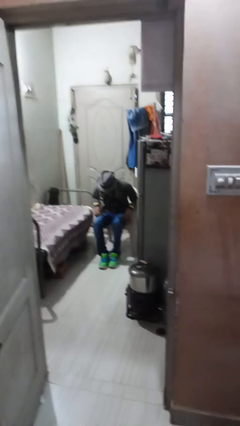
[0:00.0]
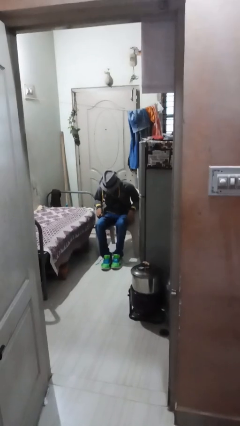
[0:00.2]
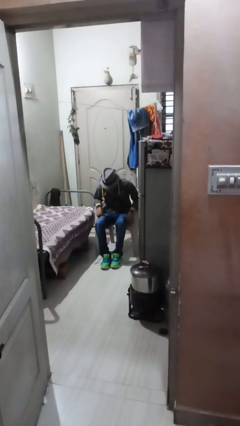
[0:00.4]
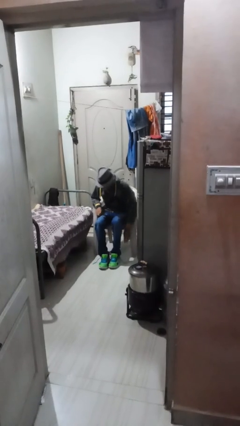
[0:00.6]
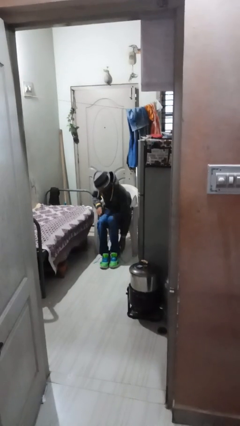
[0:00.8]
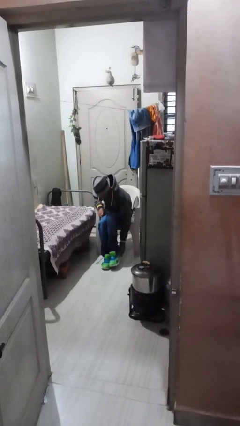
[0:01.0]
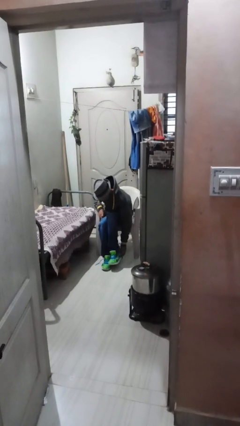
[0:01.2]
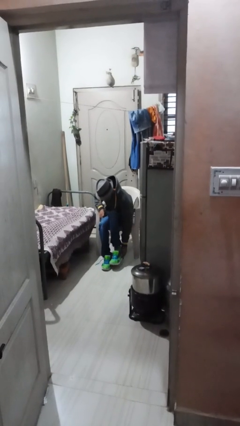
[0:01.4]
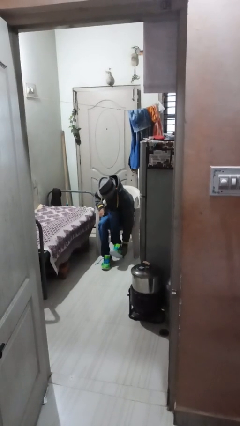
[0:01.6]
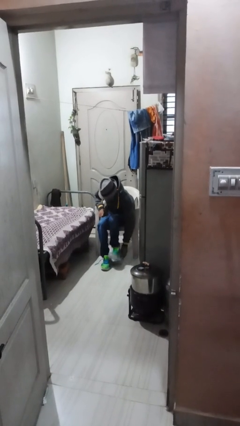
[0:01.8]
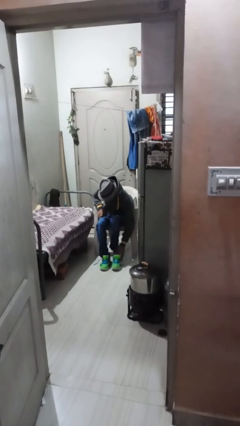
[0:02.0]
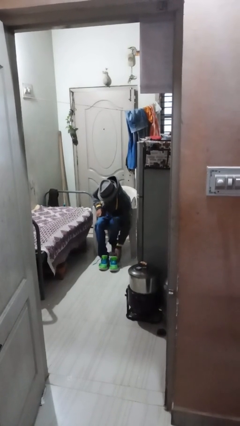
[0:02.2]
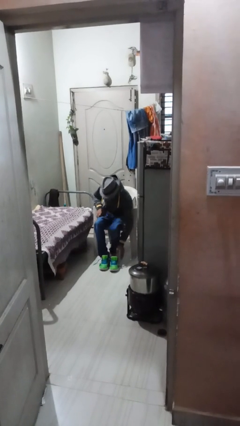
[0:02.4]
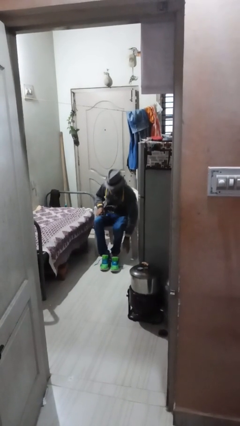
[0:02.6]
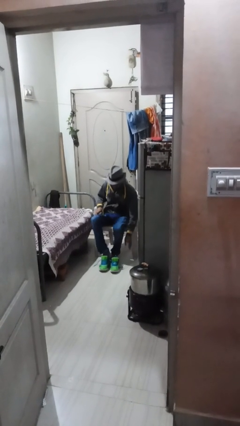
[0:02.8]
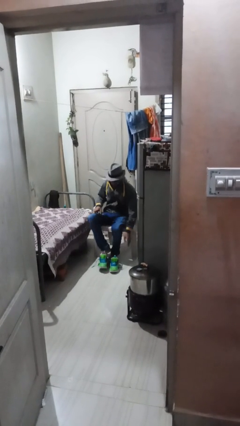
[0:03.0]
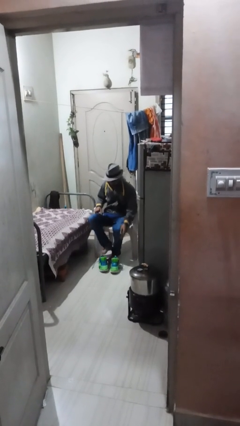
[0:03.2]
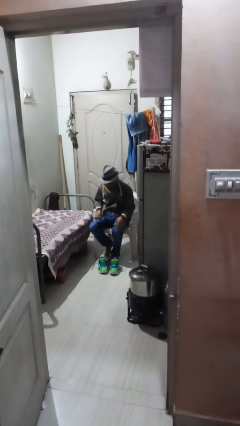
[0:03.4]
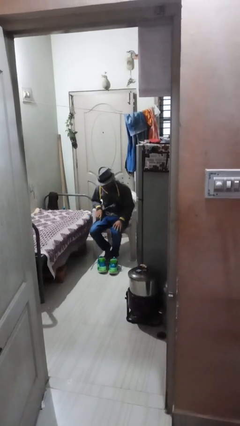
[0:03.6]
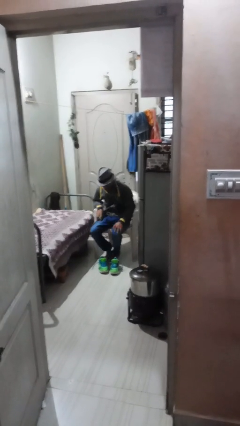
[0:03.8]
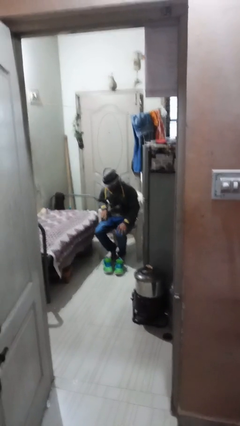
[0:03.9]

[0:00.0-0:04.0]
person takes off shoes

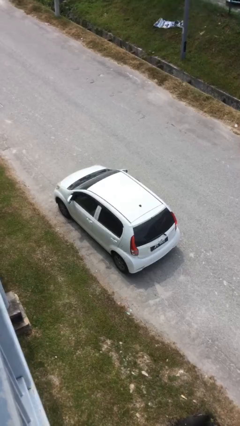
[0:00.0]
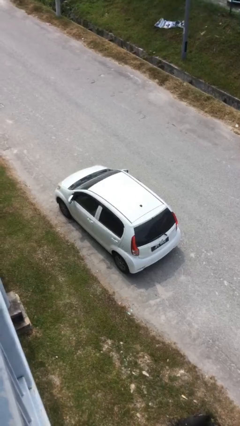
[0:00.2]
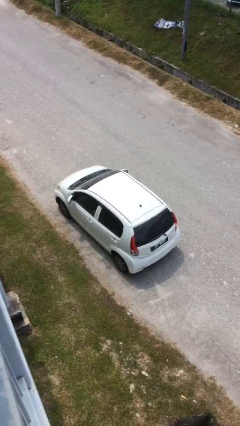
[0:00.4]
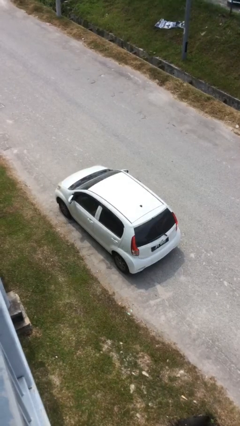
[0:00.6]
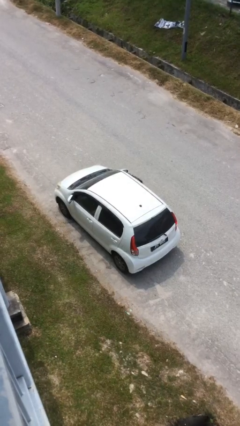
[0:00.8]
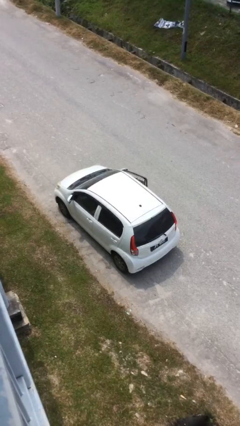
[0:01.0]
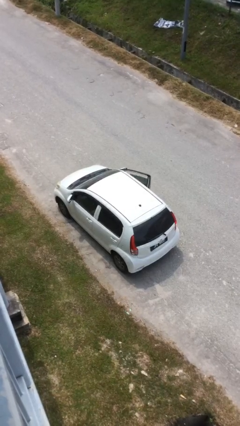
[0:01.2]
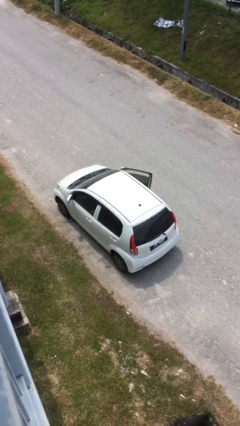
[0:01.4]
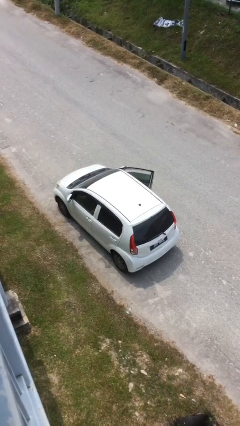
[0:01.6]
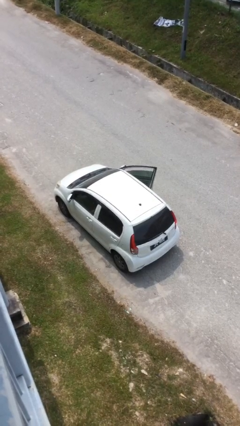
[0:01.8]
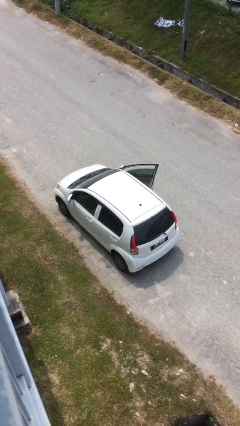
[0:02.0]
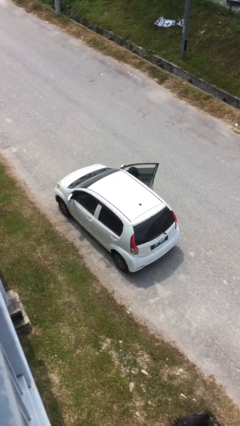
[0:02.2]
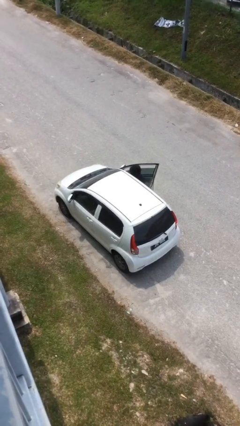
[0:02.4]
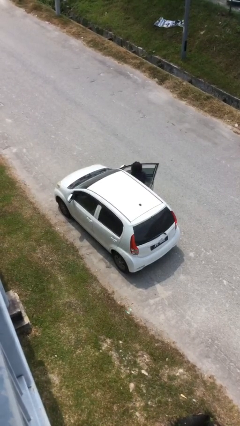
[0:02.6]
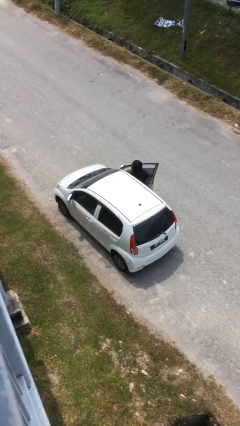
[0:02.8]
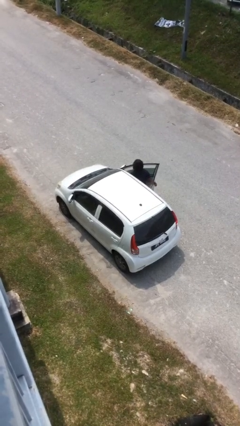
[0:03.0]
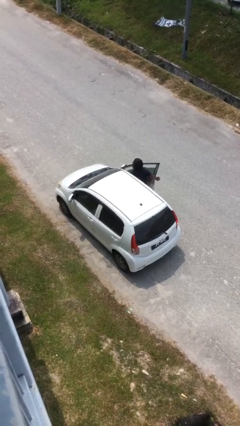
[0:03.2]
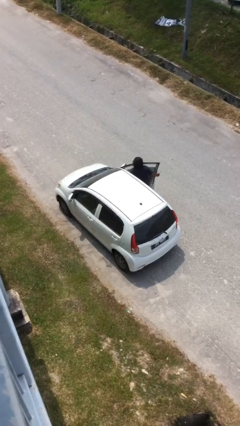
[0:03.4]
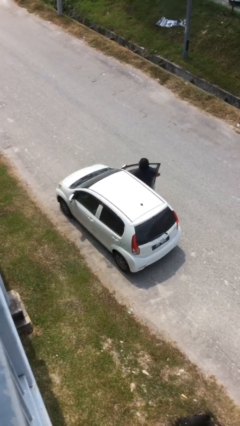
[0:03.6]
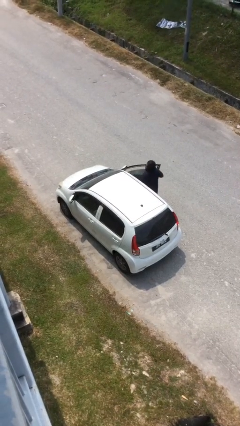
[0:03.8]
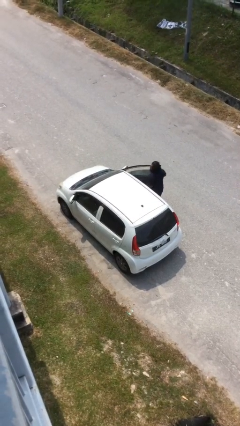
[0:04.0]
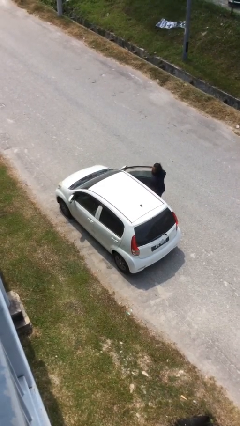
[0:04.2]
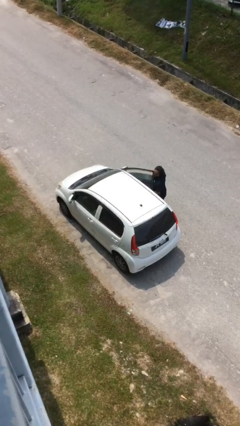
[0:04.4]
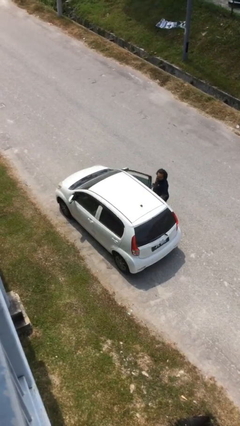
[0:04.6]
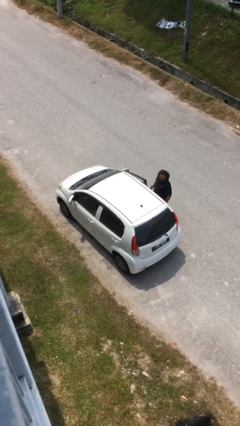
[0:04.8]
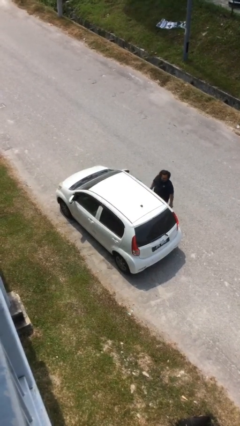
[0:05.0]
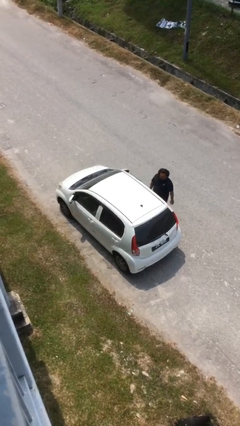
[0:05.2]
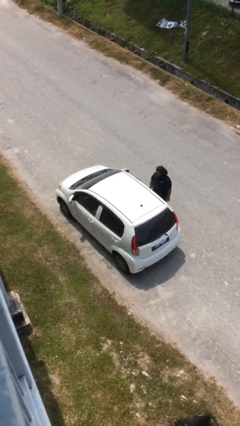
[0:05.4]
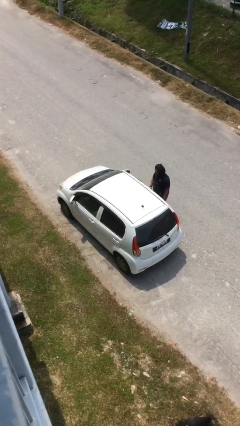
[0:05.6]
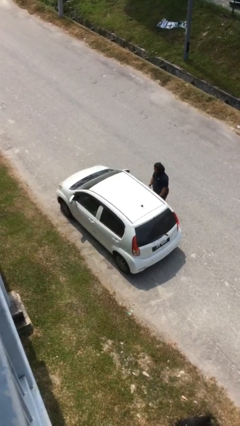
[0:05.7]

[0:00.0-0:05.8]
car drops off person

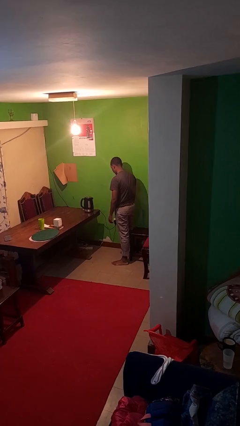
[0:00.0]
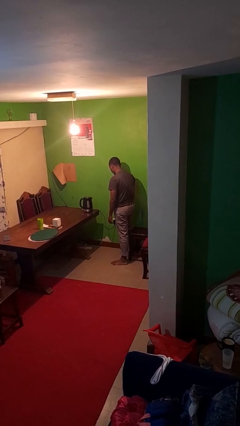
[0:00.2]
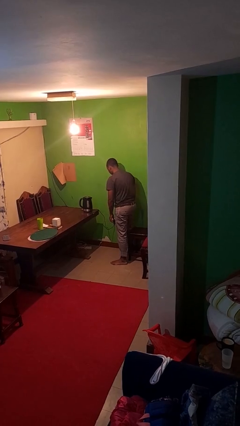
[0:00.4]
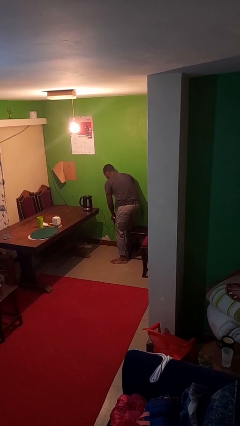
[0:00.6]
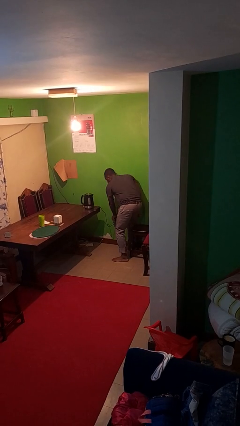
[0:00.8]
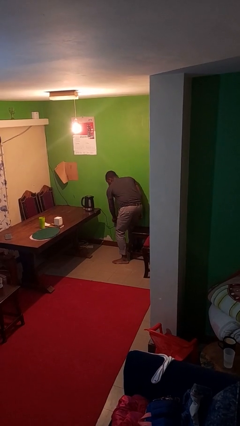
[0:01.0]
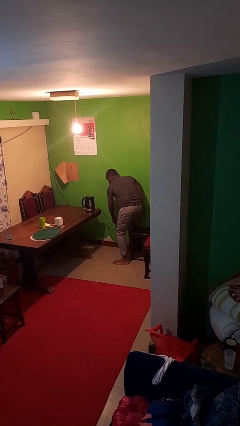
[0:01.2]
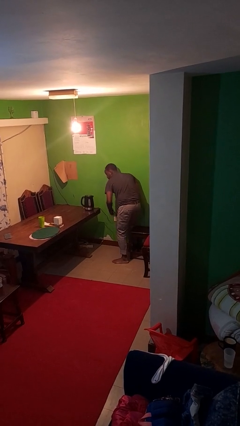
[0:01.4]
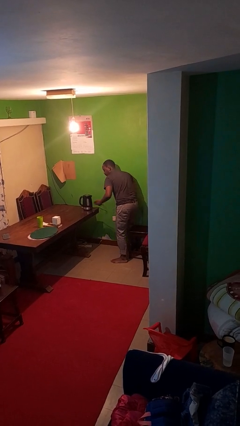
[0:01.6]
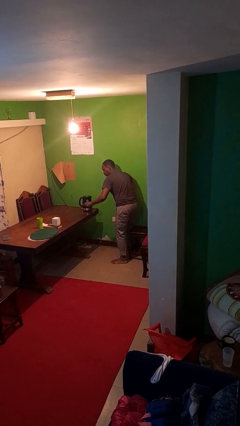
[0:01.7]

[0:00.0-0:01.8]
person unplugs from electrical socket

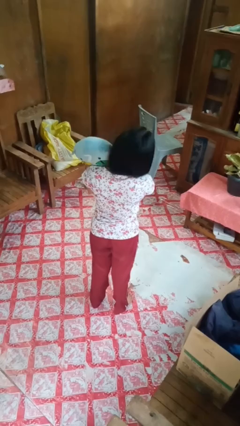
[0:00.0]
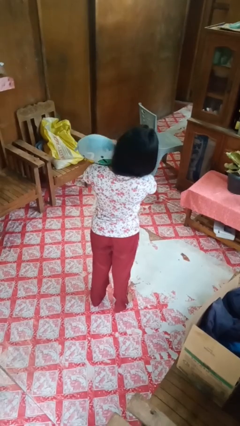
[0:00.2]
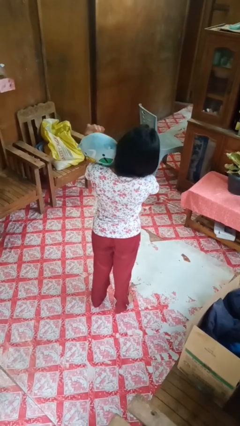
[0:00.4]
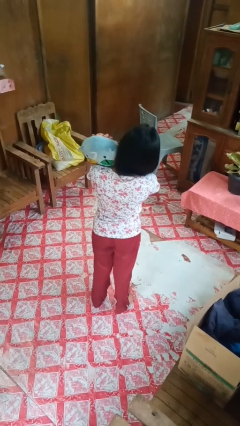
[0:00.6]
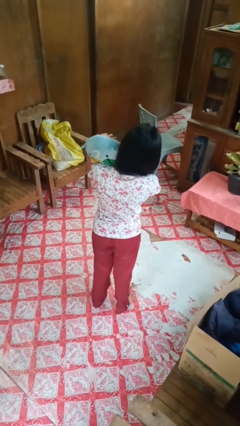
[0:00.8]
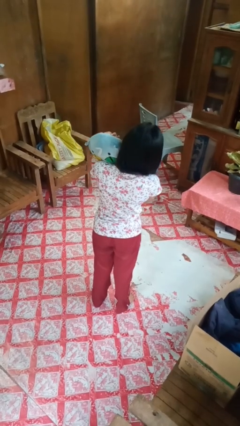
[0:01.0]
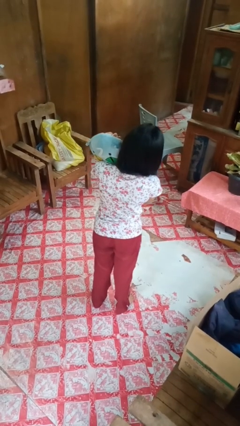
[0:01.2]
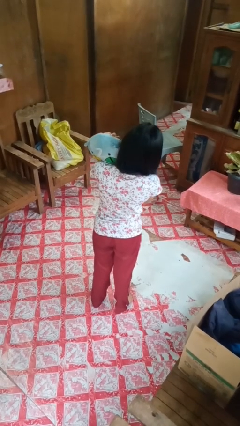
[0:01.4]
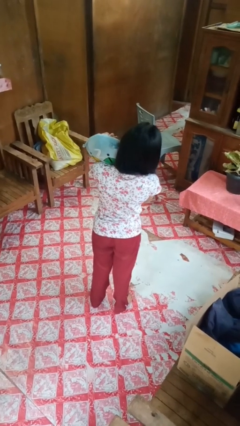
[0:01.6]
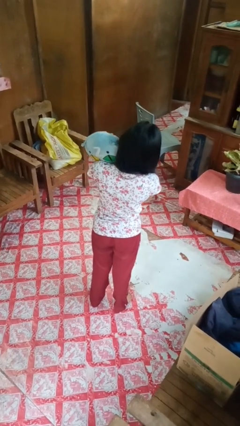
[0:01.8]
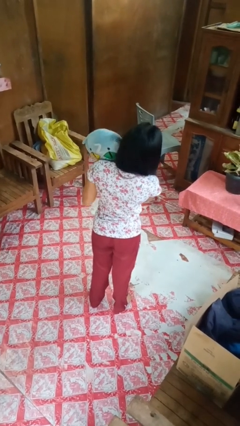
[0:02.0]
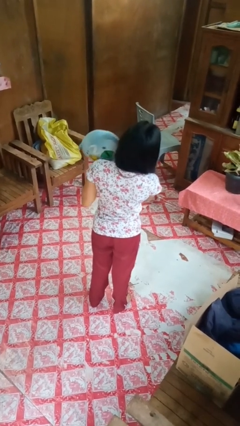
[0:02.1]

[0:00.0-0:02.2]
person hugs stuffed animal

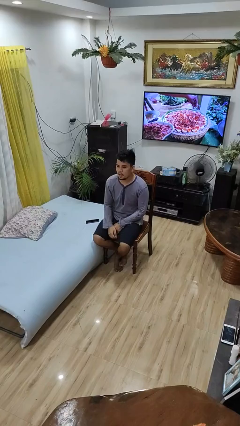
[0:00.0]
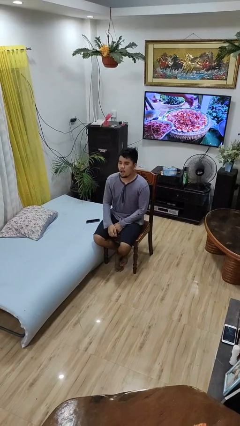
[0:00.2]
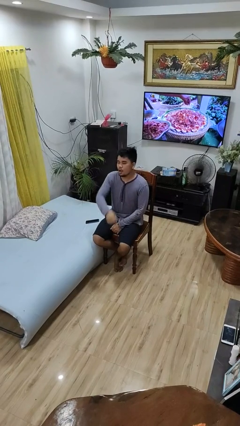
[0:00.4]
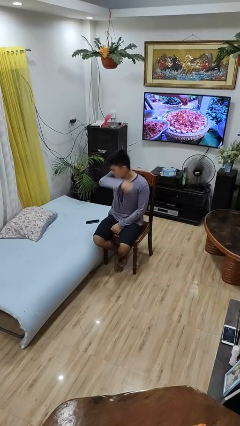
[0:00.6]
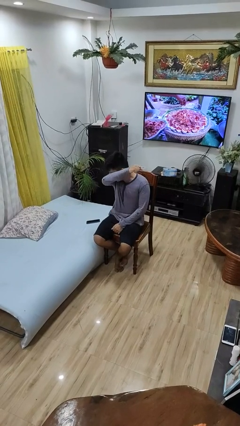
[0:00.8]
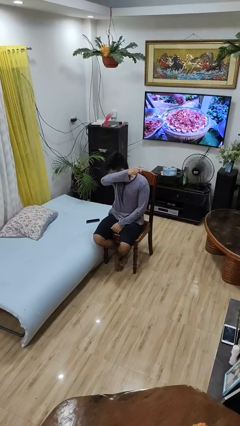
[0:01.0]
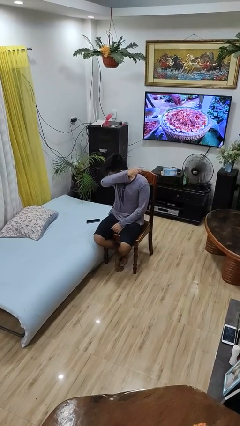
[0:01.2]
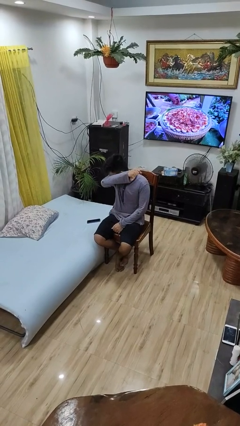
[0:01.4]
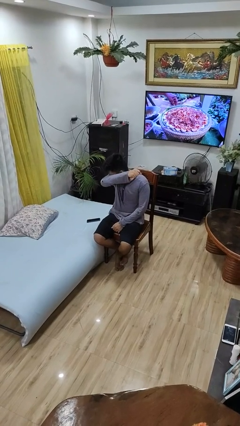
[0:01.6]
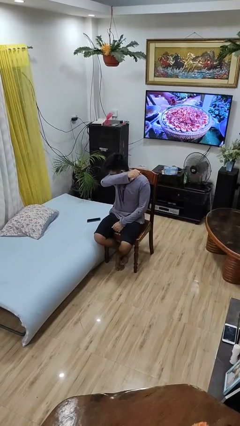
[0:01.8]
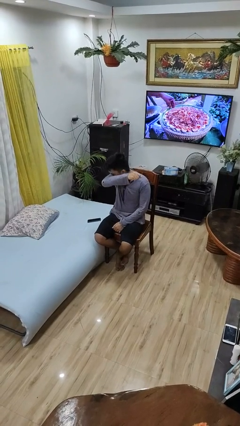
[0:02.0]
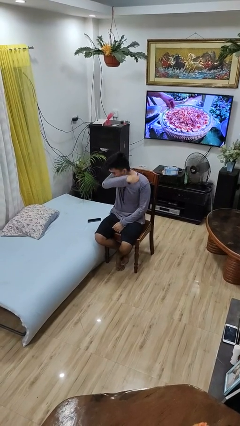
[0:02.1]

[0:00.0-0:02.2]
person sneezes into arm

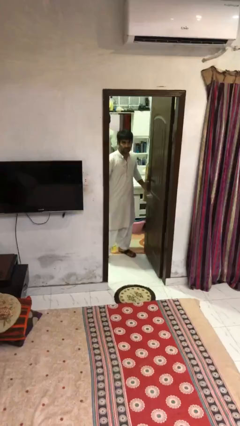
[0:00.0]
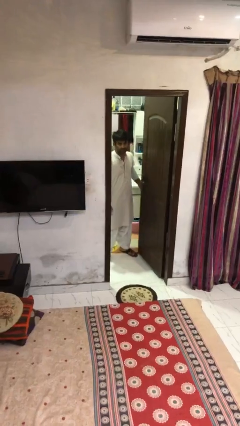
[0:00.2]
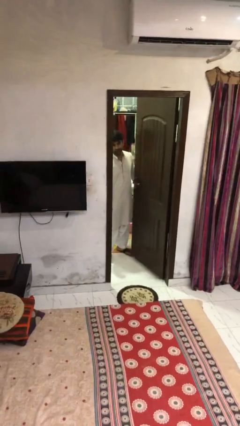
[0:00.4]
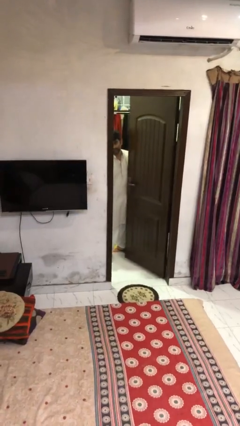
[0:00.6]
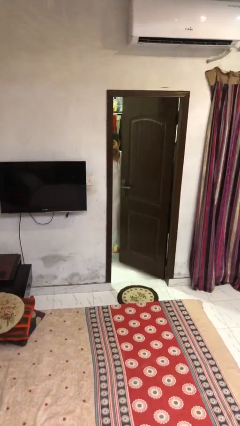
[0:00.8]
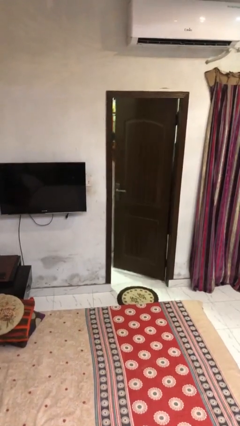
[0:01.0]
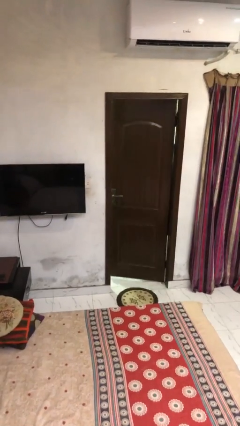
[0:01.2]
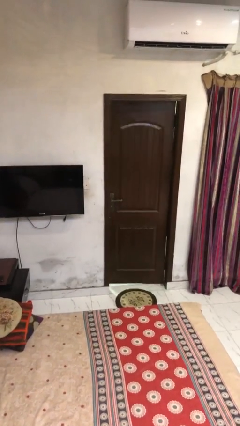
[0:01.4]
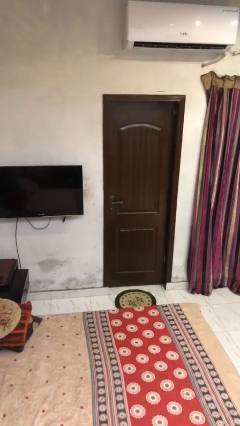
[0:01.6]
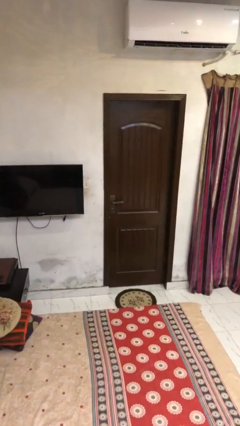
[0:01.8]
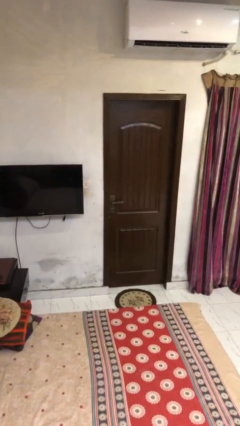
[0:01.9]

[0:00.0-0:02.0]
person closes facility door
